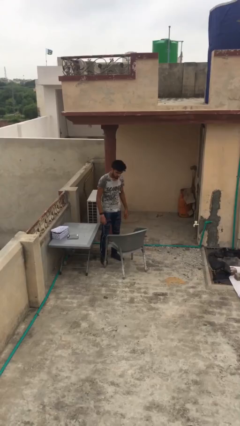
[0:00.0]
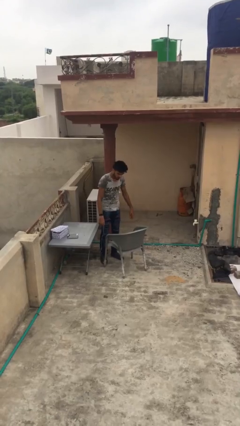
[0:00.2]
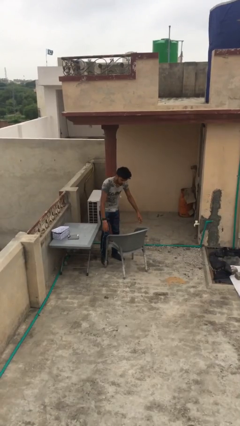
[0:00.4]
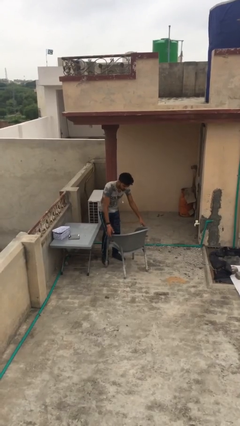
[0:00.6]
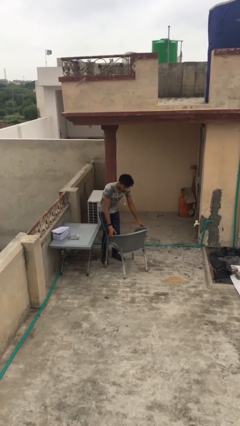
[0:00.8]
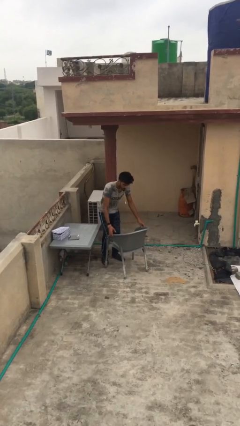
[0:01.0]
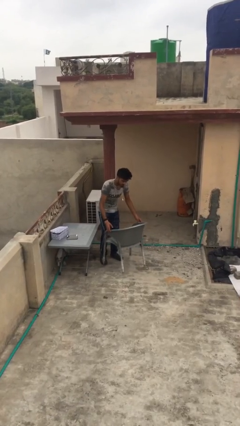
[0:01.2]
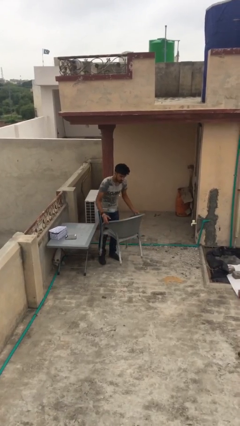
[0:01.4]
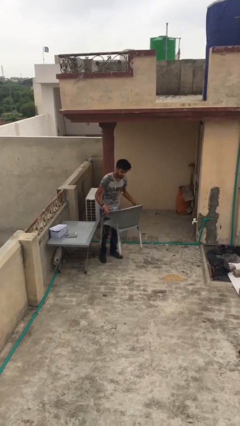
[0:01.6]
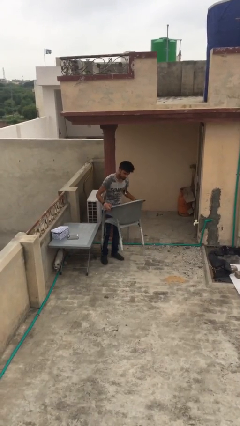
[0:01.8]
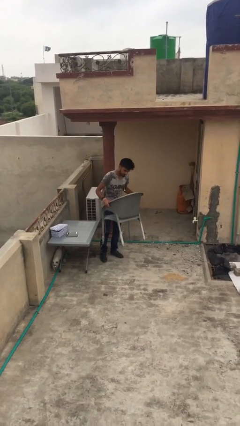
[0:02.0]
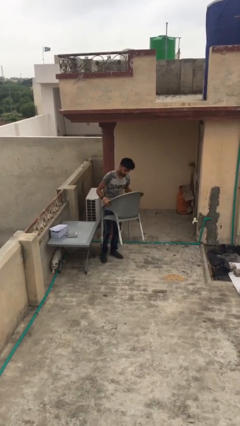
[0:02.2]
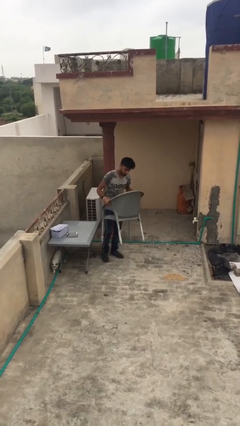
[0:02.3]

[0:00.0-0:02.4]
person picks up object from floor

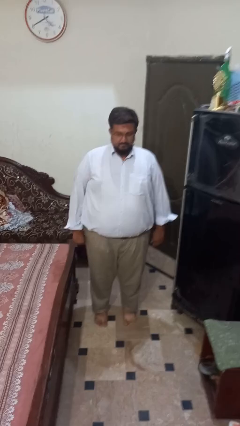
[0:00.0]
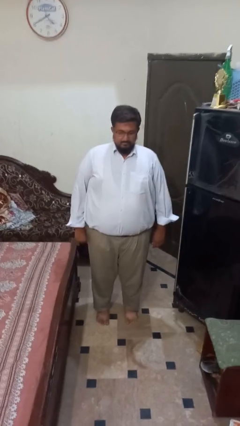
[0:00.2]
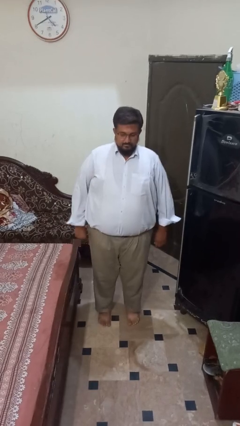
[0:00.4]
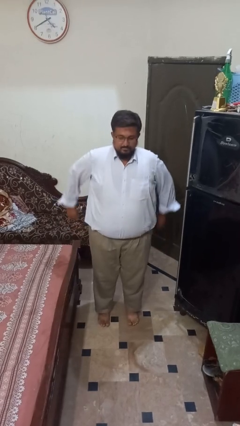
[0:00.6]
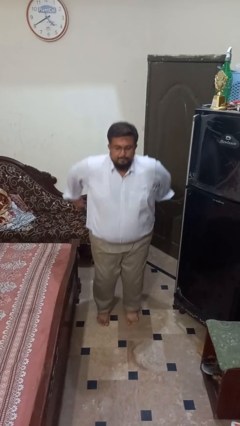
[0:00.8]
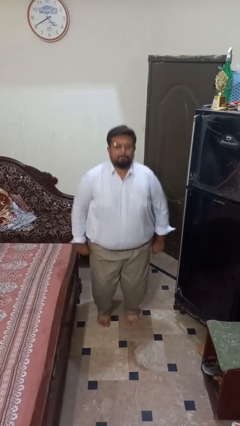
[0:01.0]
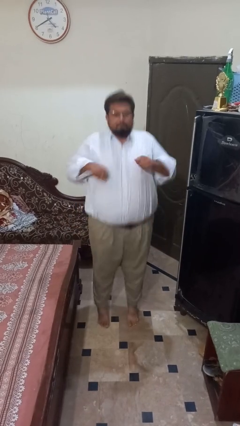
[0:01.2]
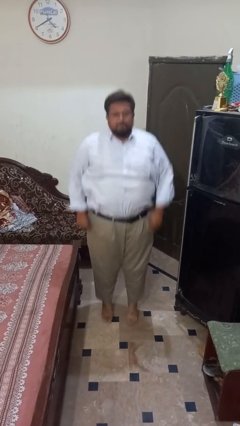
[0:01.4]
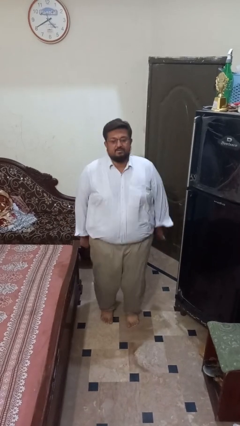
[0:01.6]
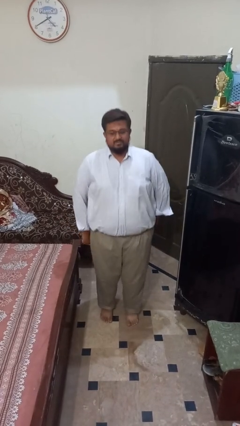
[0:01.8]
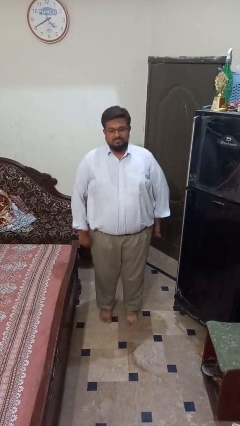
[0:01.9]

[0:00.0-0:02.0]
person jumps

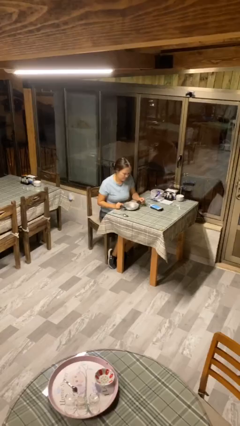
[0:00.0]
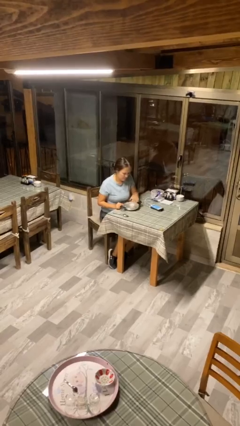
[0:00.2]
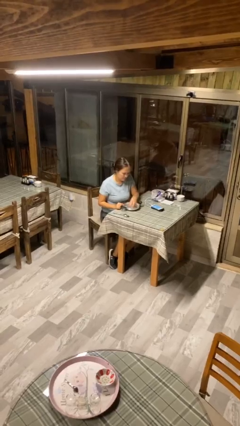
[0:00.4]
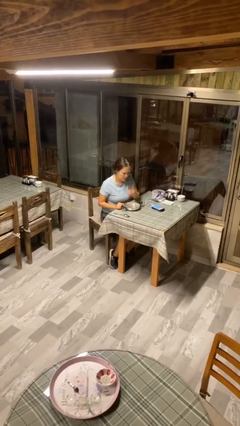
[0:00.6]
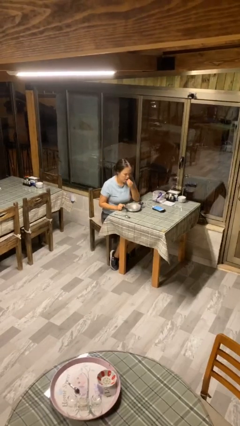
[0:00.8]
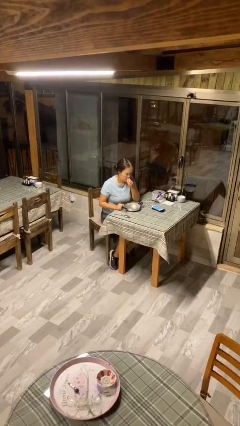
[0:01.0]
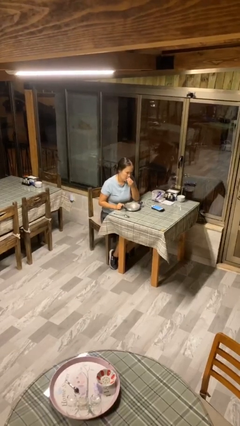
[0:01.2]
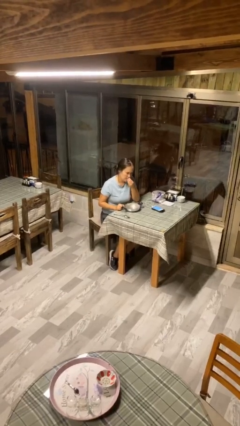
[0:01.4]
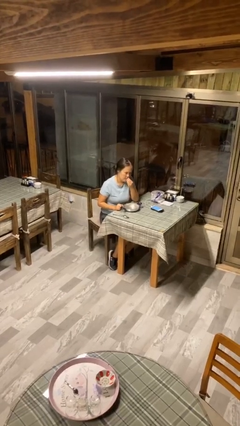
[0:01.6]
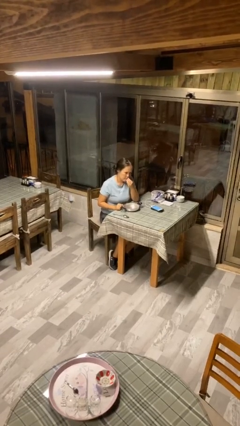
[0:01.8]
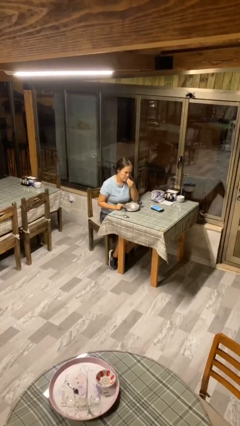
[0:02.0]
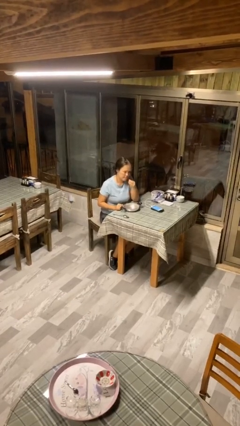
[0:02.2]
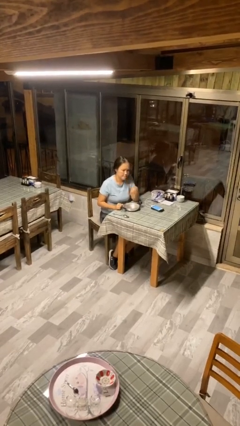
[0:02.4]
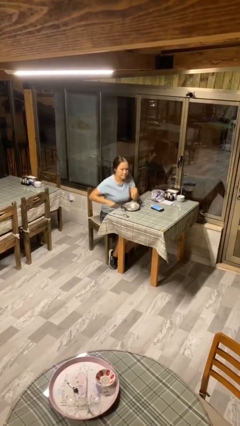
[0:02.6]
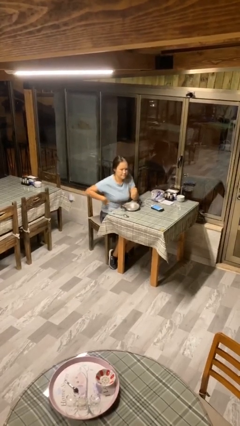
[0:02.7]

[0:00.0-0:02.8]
person eats with hands

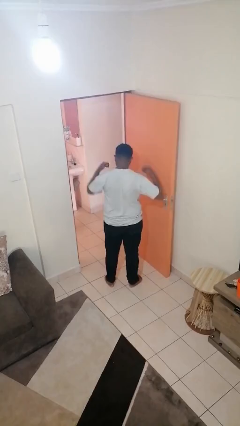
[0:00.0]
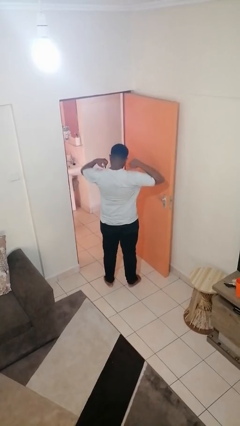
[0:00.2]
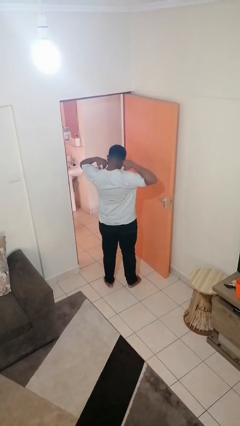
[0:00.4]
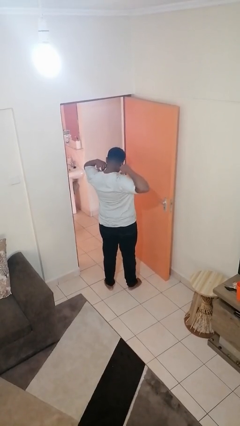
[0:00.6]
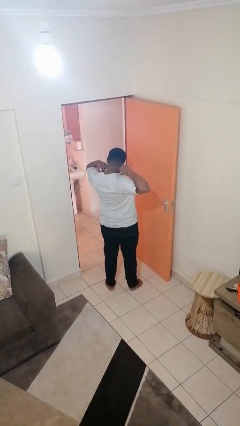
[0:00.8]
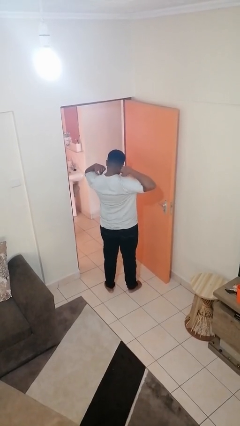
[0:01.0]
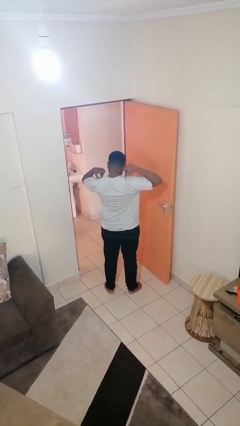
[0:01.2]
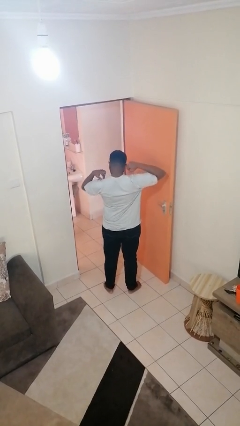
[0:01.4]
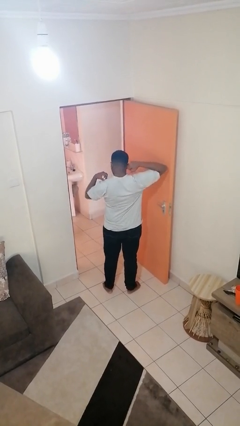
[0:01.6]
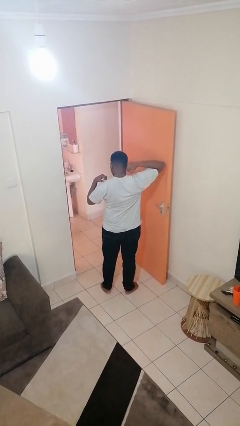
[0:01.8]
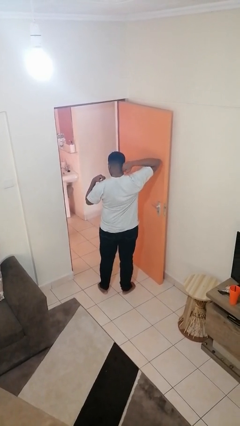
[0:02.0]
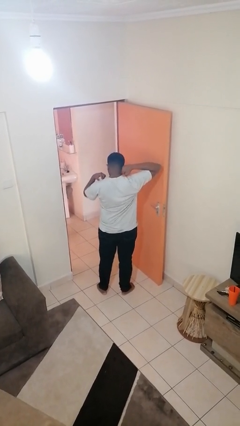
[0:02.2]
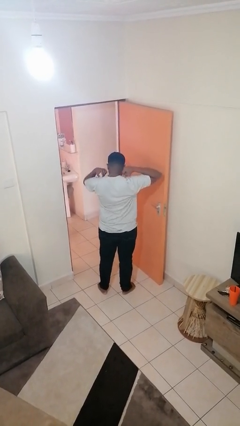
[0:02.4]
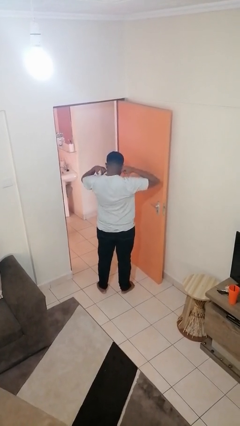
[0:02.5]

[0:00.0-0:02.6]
person stretches arms to side

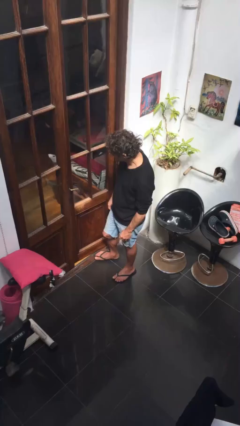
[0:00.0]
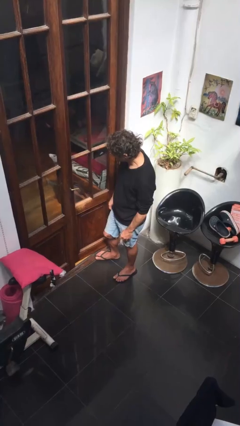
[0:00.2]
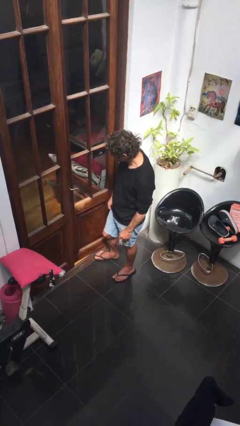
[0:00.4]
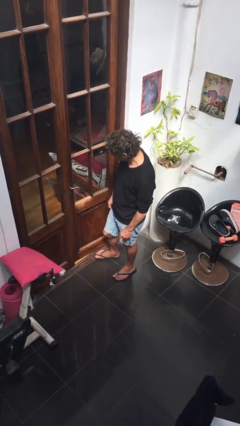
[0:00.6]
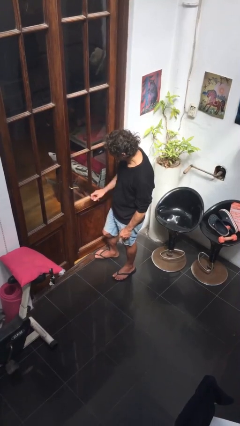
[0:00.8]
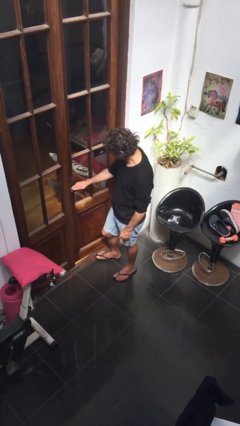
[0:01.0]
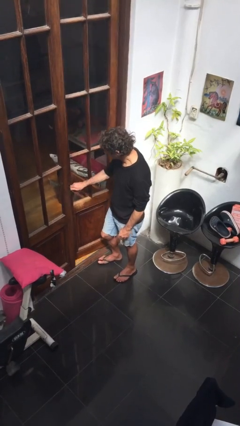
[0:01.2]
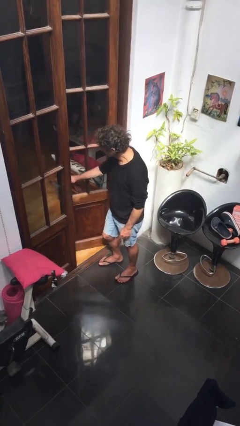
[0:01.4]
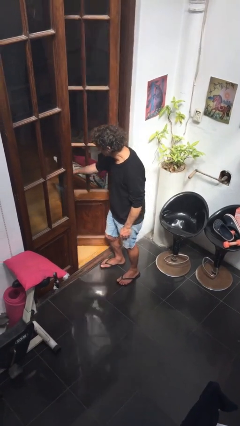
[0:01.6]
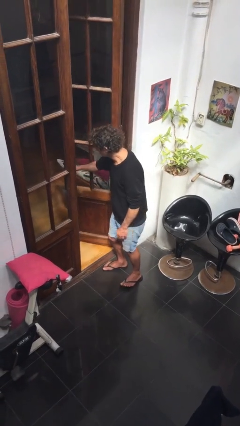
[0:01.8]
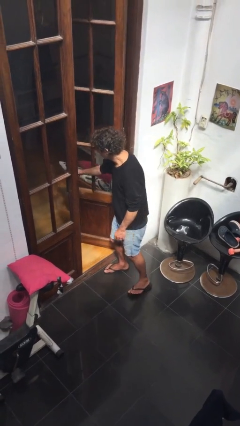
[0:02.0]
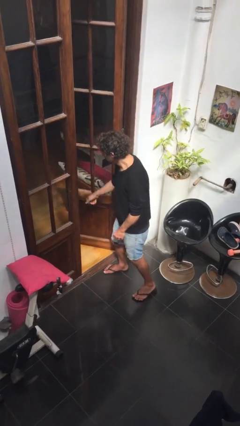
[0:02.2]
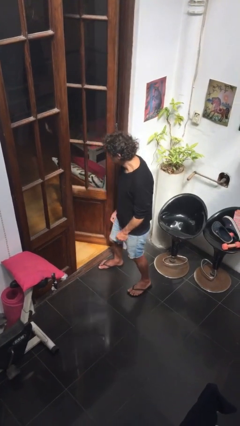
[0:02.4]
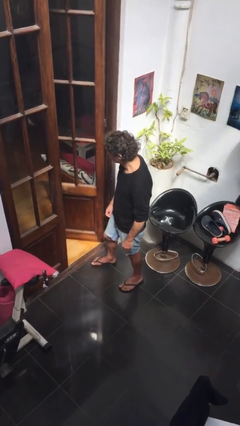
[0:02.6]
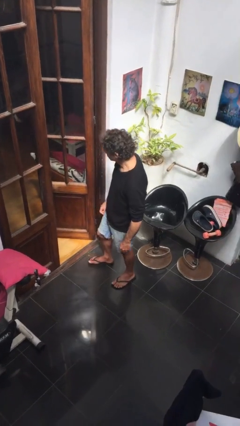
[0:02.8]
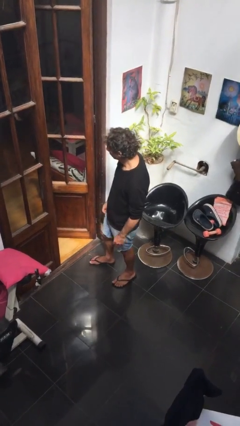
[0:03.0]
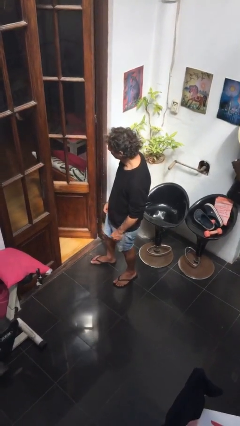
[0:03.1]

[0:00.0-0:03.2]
person opens facility door

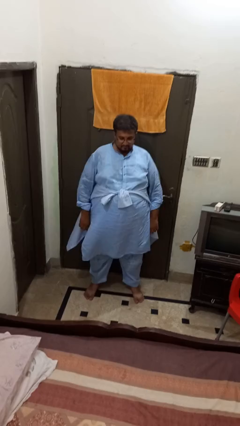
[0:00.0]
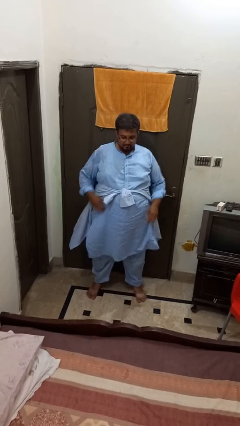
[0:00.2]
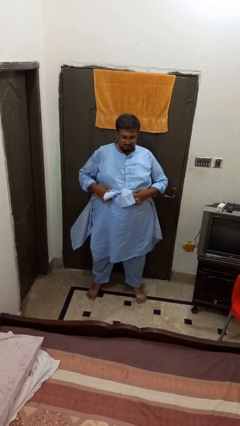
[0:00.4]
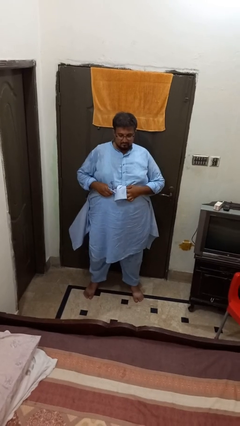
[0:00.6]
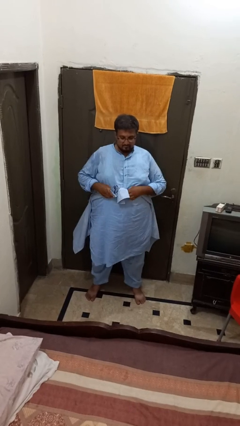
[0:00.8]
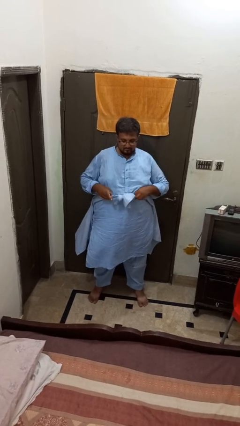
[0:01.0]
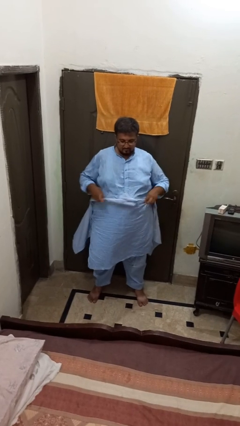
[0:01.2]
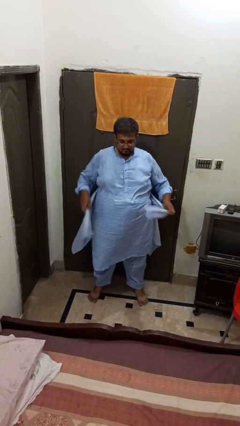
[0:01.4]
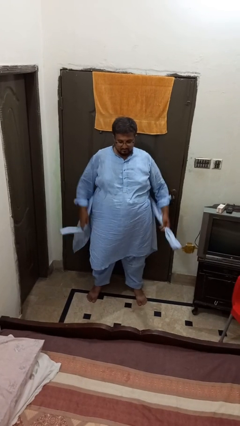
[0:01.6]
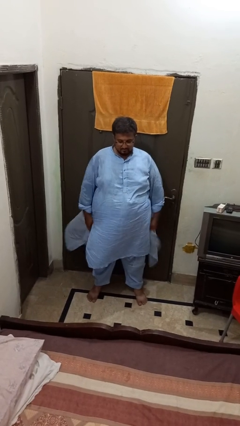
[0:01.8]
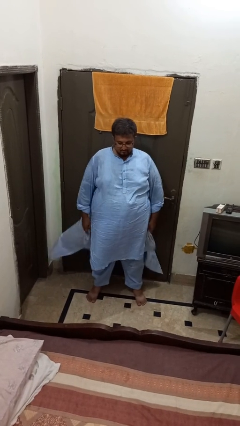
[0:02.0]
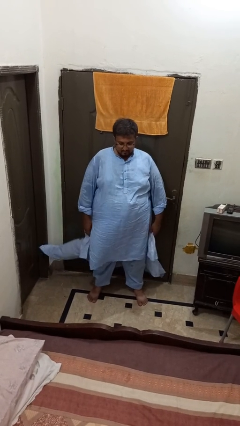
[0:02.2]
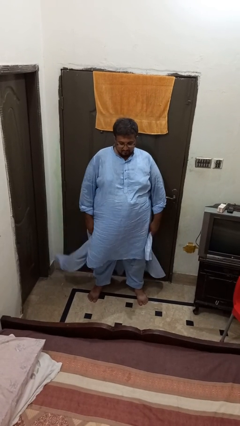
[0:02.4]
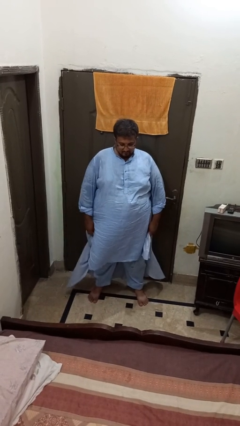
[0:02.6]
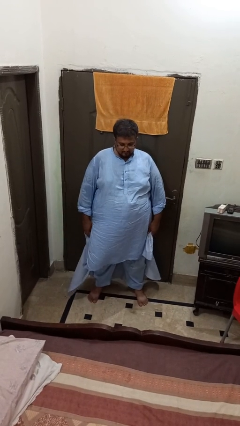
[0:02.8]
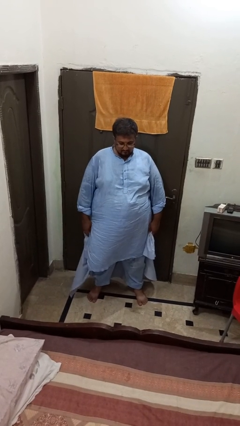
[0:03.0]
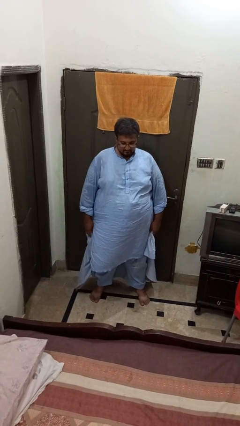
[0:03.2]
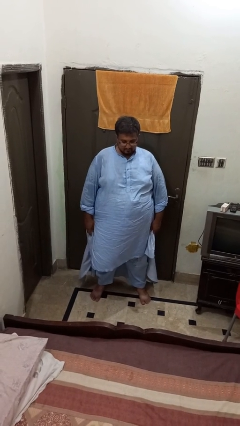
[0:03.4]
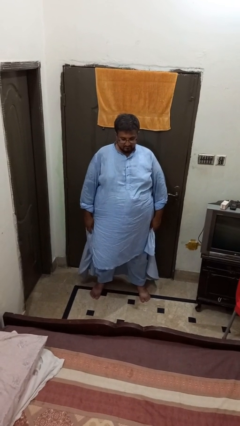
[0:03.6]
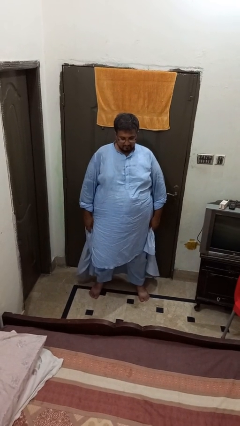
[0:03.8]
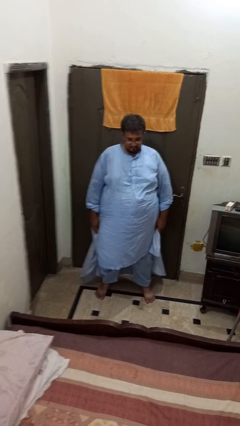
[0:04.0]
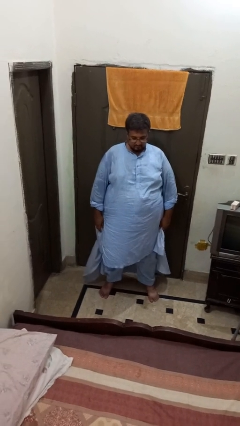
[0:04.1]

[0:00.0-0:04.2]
person unties jacket around waist
